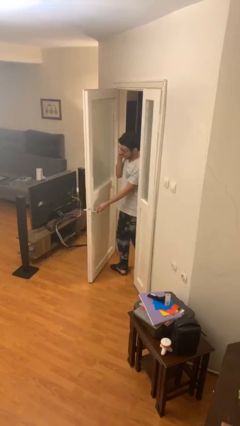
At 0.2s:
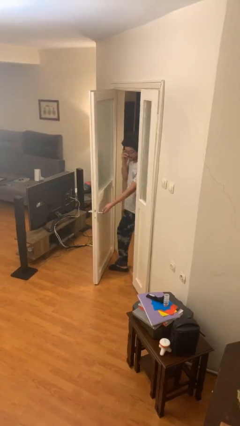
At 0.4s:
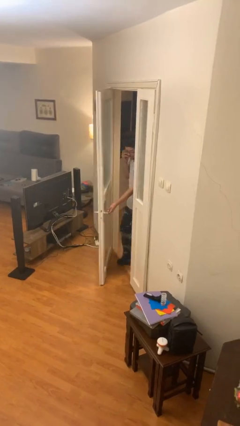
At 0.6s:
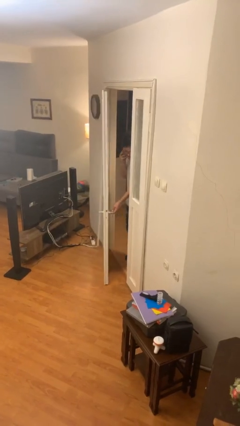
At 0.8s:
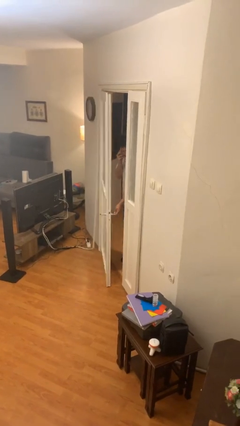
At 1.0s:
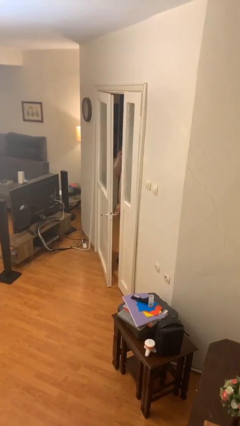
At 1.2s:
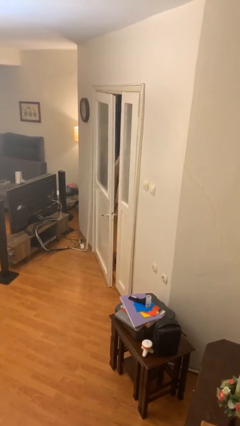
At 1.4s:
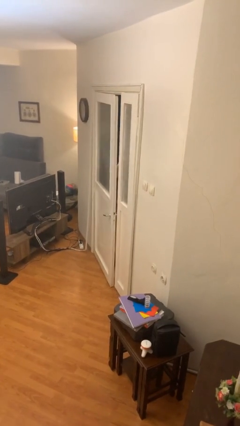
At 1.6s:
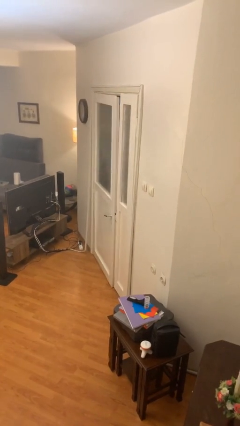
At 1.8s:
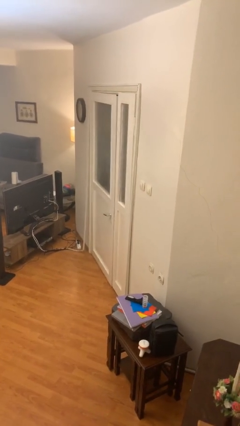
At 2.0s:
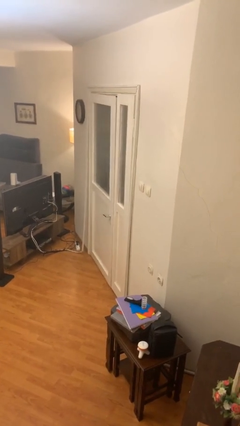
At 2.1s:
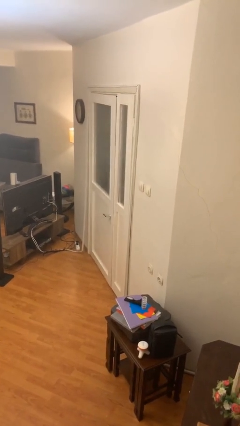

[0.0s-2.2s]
person closes facility door

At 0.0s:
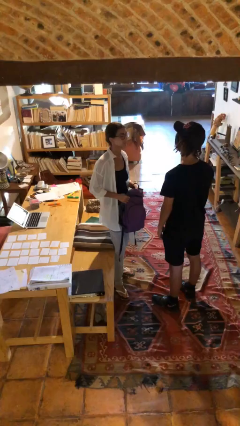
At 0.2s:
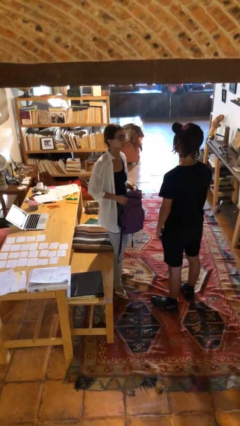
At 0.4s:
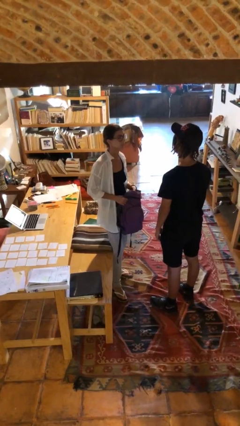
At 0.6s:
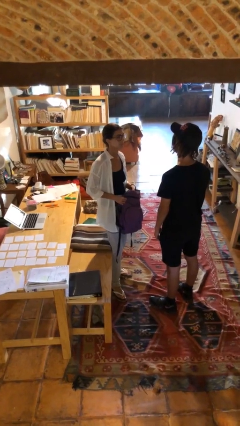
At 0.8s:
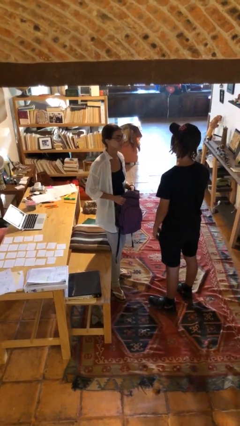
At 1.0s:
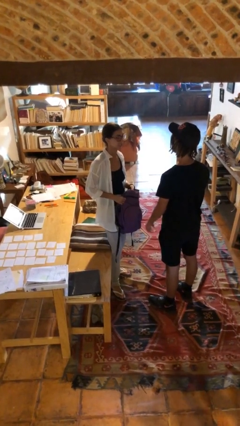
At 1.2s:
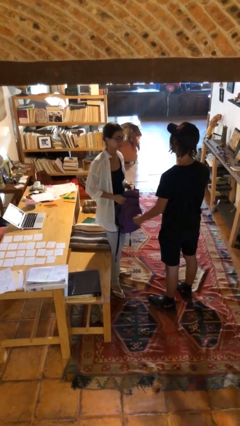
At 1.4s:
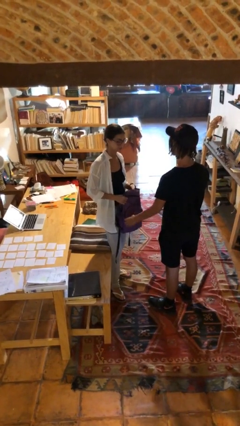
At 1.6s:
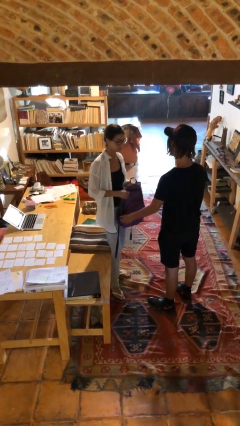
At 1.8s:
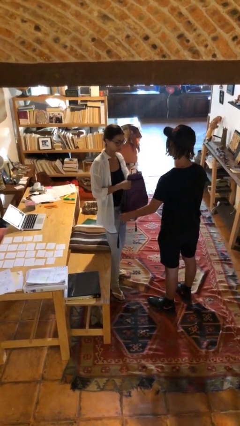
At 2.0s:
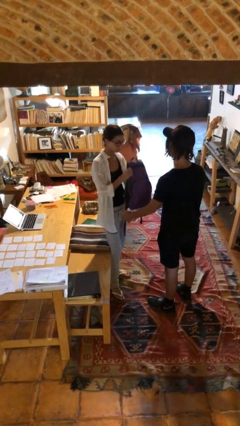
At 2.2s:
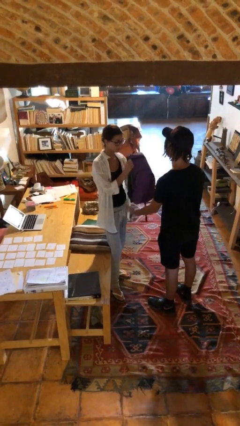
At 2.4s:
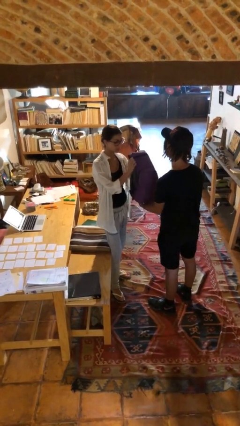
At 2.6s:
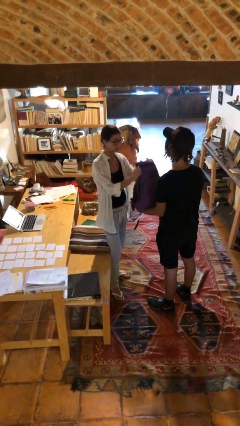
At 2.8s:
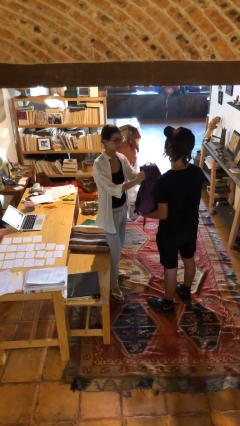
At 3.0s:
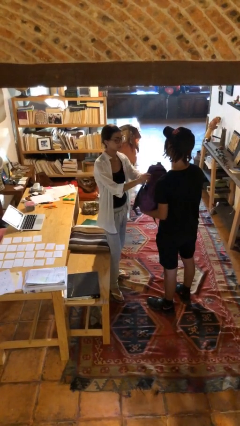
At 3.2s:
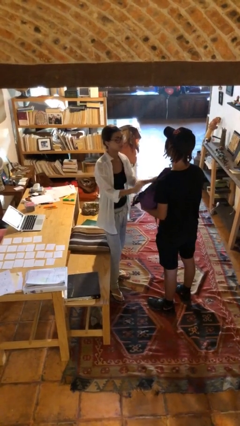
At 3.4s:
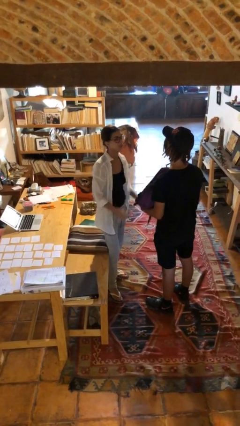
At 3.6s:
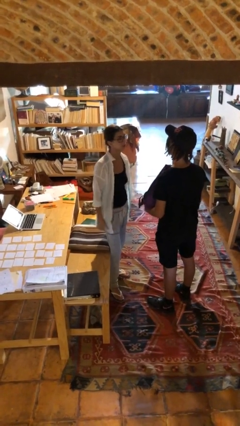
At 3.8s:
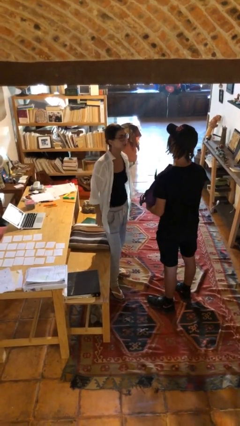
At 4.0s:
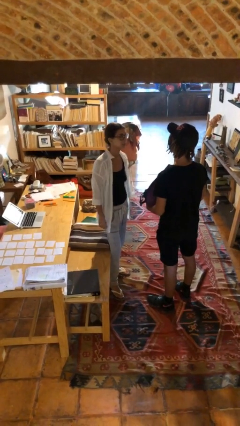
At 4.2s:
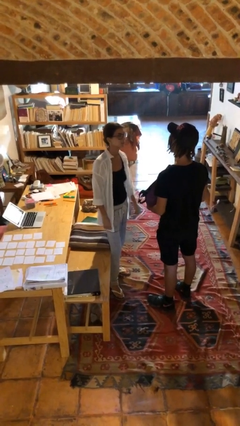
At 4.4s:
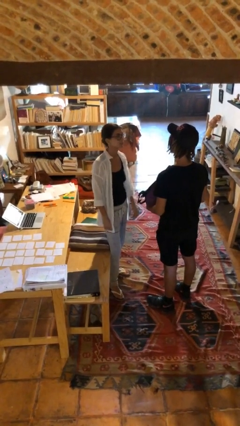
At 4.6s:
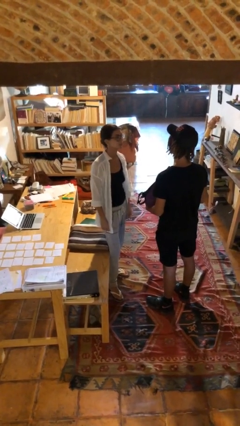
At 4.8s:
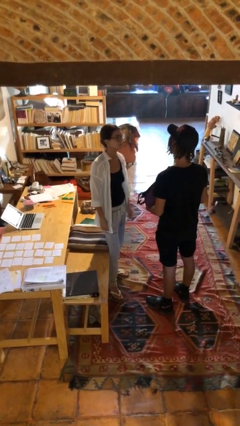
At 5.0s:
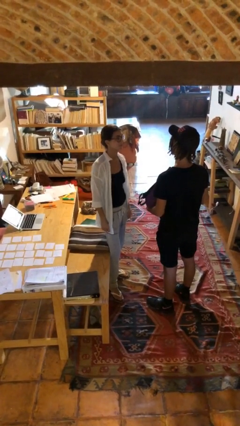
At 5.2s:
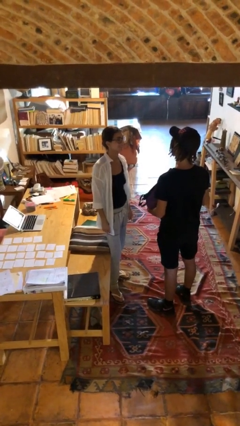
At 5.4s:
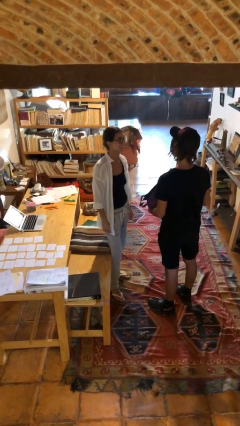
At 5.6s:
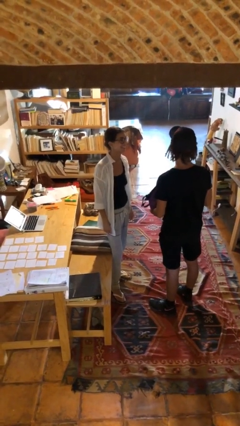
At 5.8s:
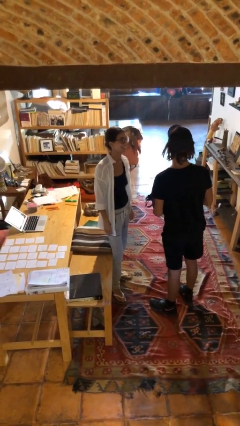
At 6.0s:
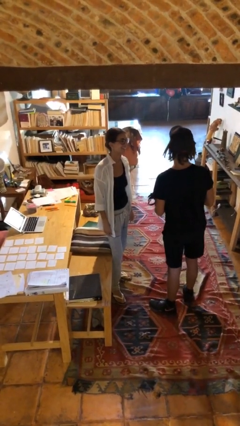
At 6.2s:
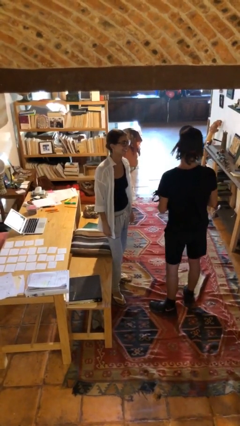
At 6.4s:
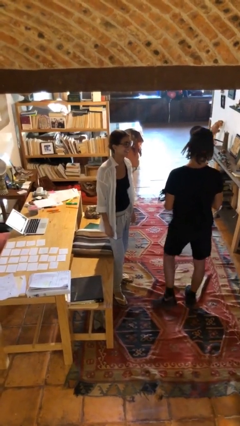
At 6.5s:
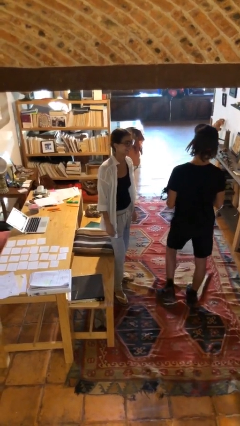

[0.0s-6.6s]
person transfers object to person

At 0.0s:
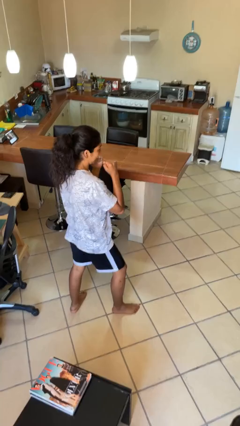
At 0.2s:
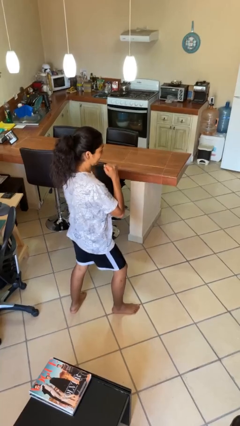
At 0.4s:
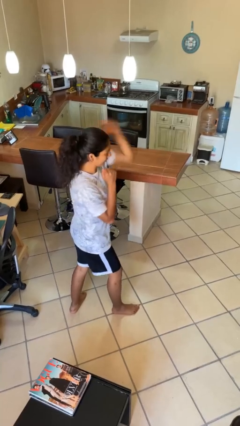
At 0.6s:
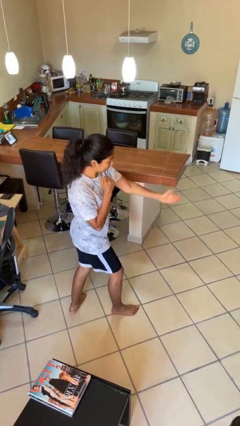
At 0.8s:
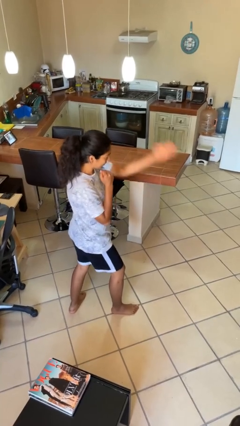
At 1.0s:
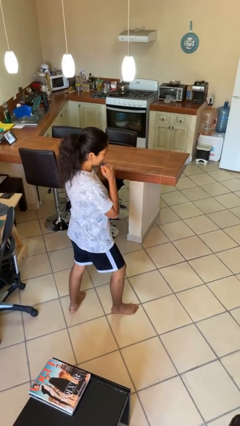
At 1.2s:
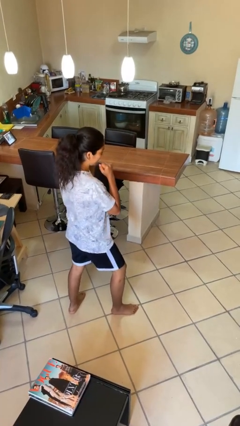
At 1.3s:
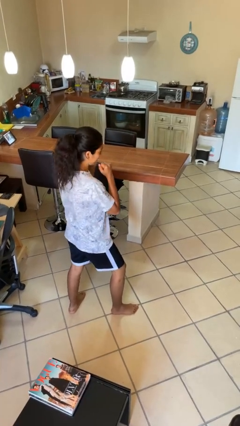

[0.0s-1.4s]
person karate chop

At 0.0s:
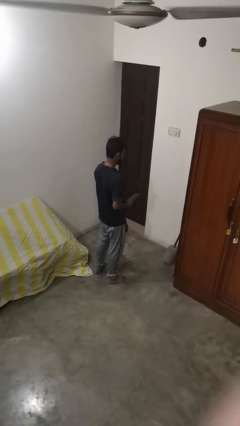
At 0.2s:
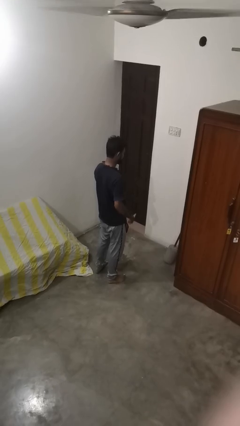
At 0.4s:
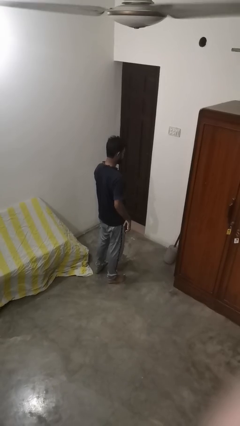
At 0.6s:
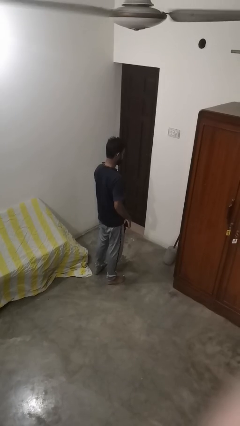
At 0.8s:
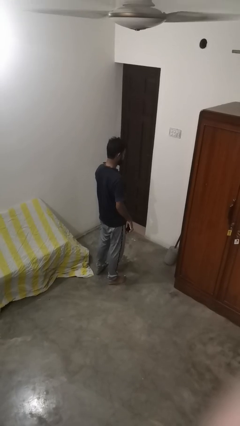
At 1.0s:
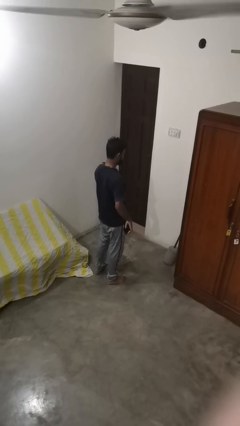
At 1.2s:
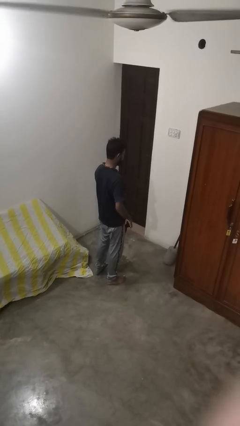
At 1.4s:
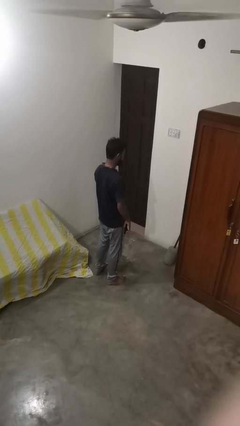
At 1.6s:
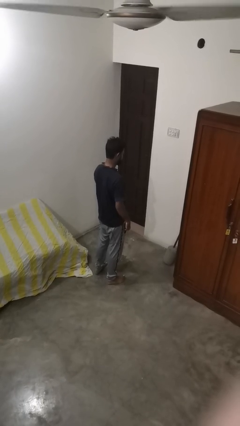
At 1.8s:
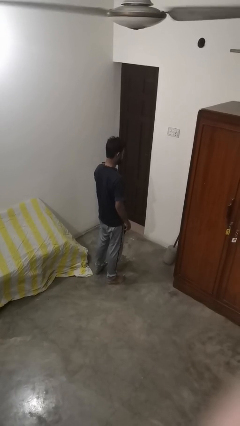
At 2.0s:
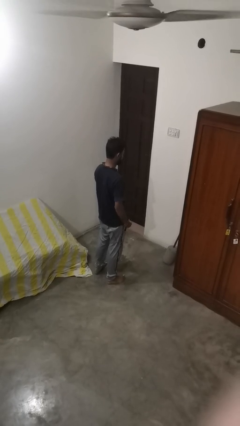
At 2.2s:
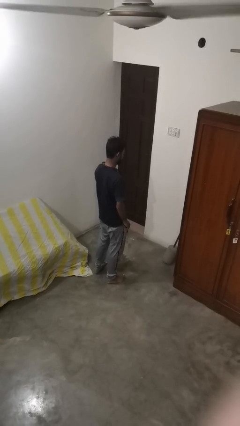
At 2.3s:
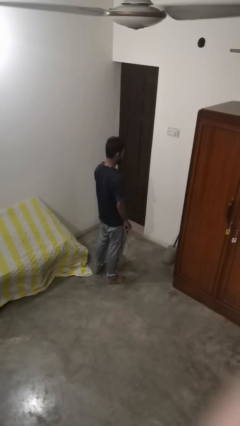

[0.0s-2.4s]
person puts phone into pocket

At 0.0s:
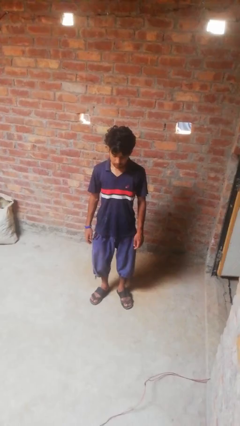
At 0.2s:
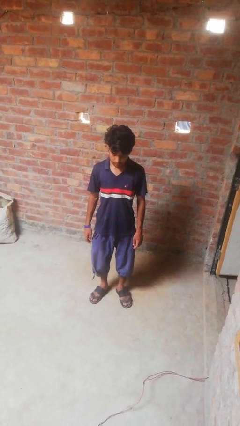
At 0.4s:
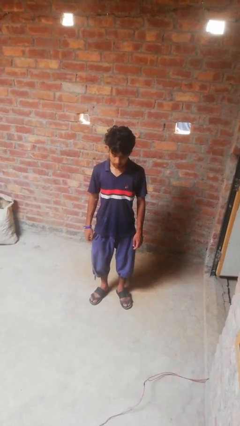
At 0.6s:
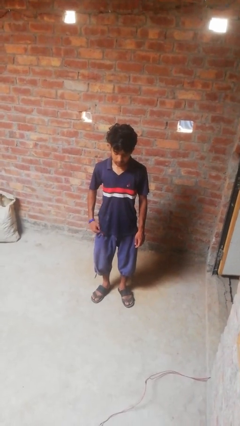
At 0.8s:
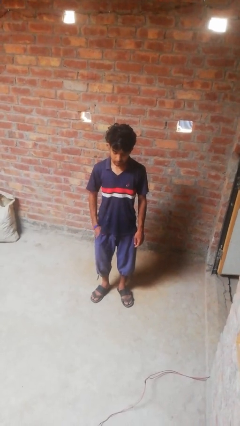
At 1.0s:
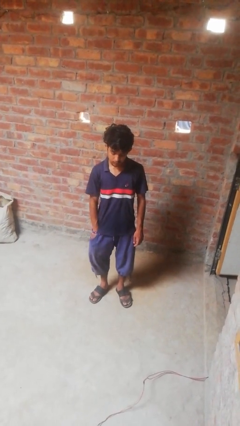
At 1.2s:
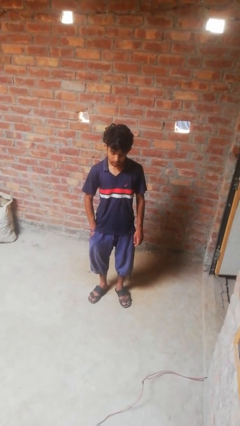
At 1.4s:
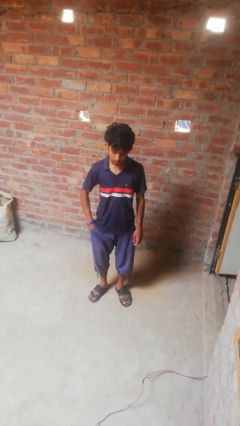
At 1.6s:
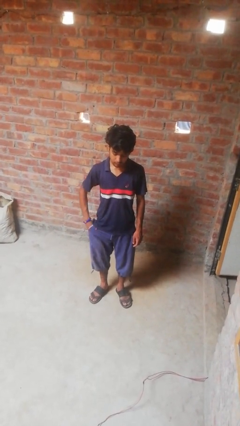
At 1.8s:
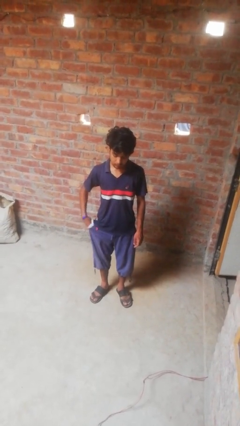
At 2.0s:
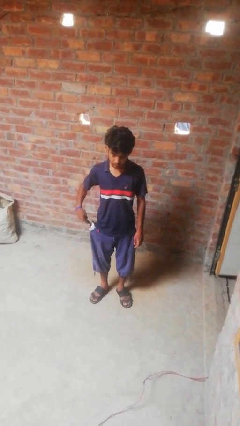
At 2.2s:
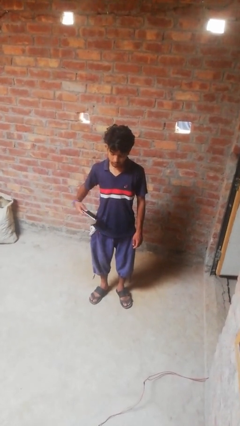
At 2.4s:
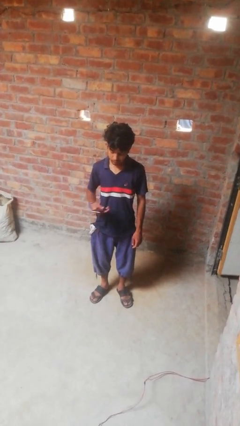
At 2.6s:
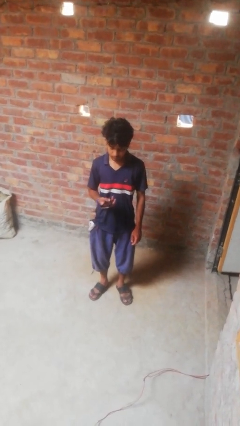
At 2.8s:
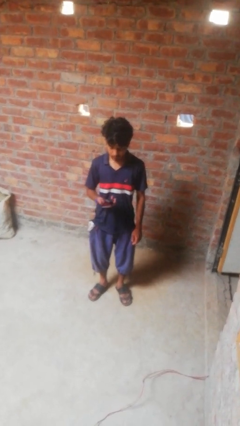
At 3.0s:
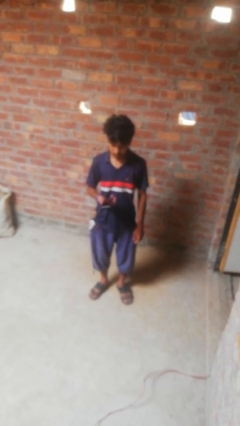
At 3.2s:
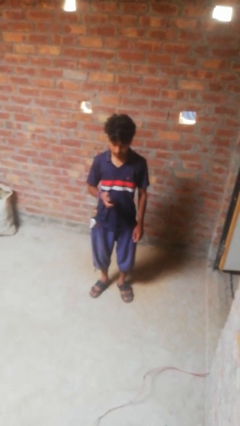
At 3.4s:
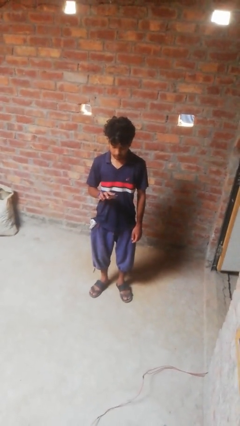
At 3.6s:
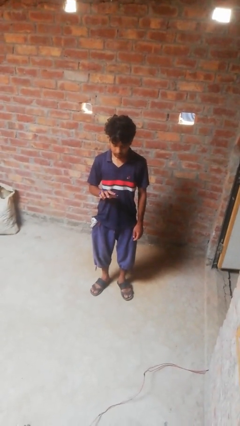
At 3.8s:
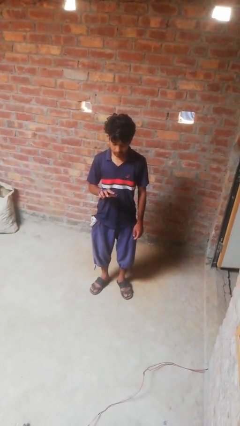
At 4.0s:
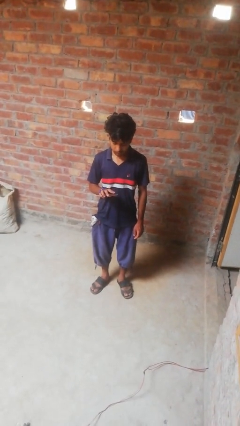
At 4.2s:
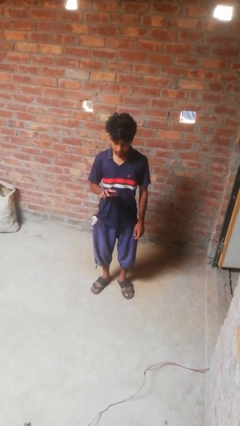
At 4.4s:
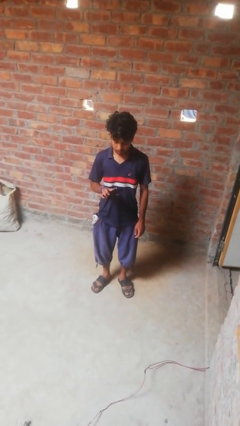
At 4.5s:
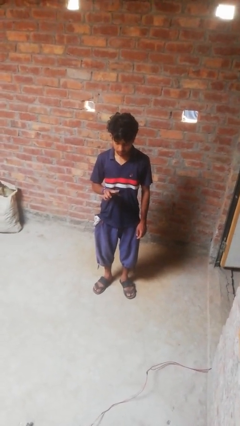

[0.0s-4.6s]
person takes phone from pocket

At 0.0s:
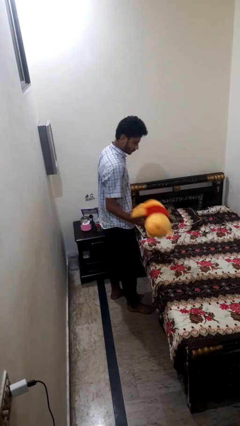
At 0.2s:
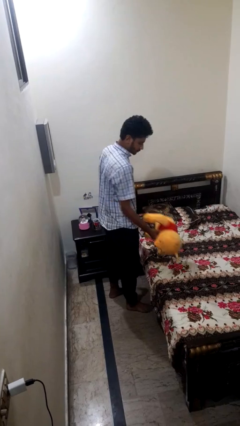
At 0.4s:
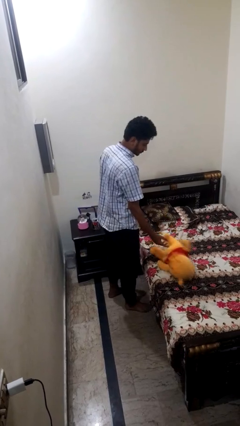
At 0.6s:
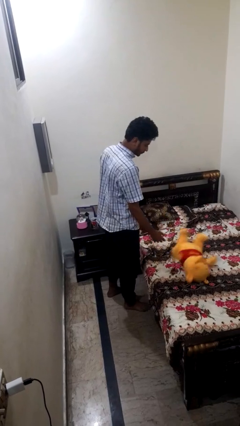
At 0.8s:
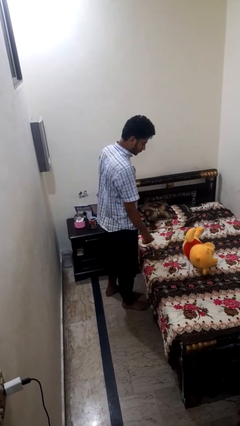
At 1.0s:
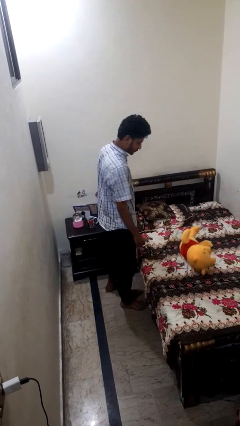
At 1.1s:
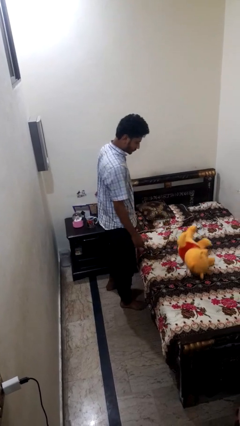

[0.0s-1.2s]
person puts down object on bed
